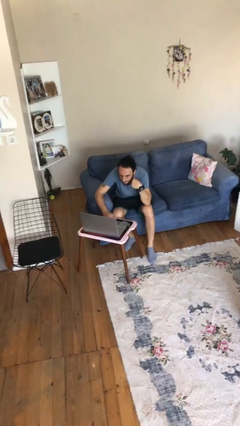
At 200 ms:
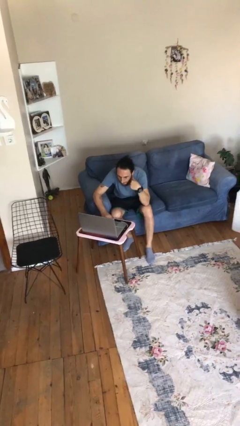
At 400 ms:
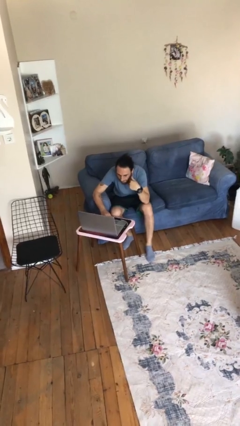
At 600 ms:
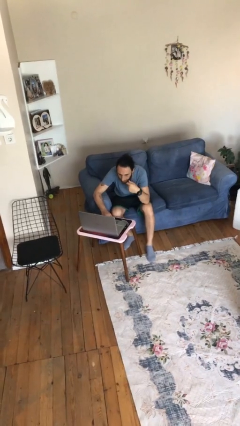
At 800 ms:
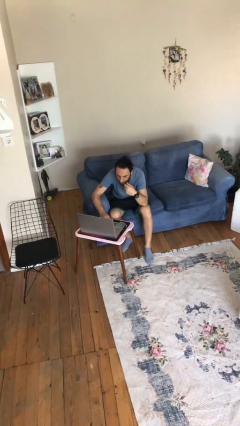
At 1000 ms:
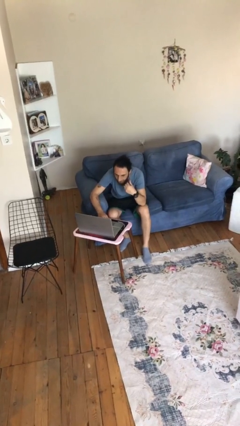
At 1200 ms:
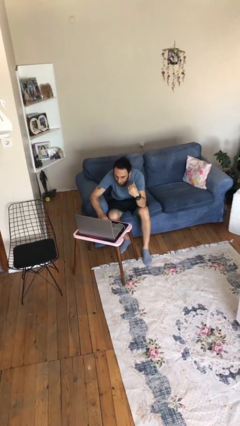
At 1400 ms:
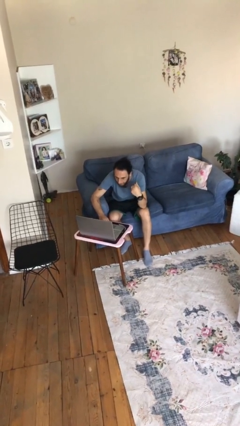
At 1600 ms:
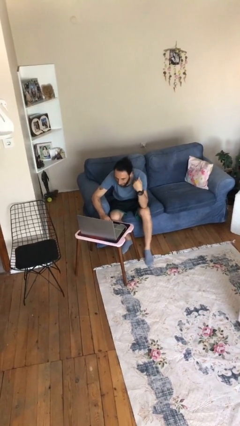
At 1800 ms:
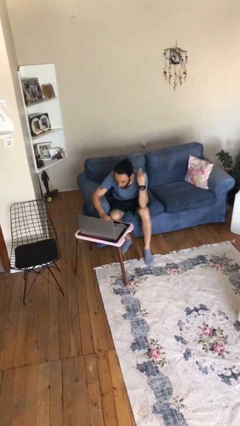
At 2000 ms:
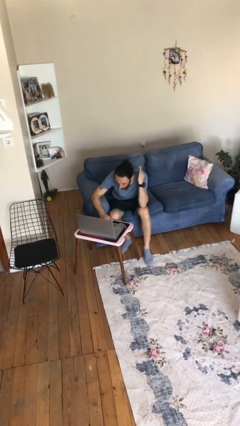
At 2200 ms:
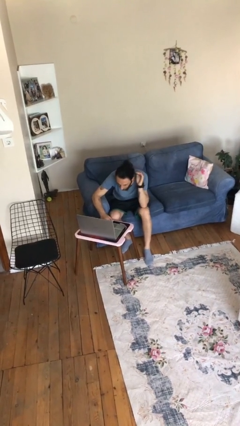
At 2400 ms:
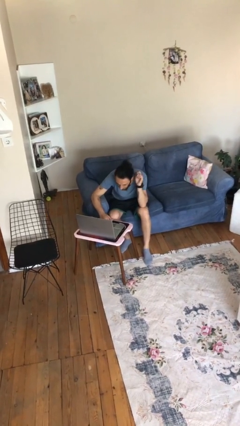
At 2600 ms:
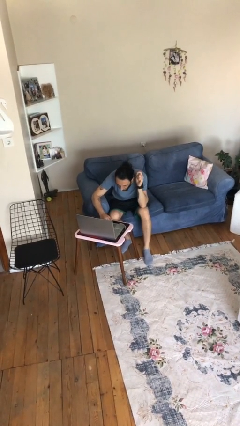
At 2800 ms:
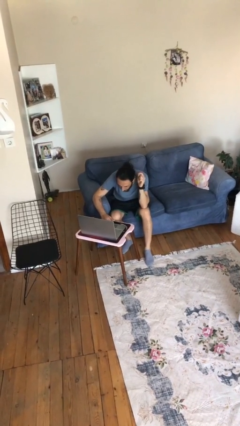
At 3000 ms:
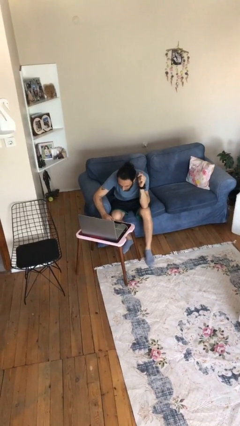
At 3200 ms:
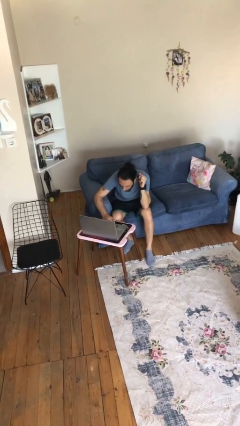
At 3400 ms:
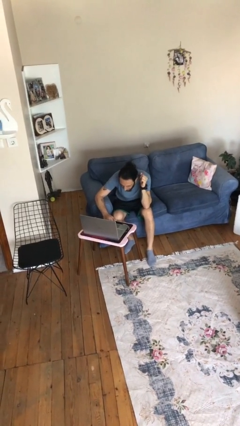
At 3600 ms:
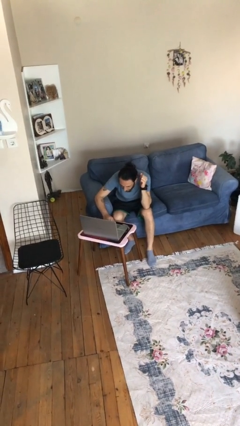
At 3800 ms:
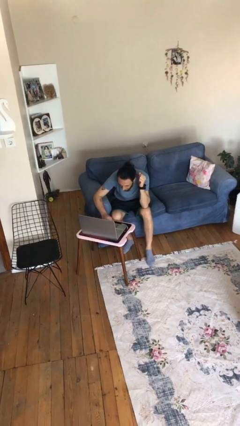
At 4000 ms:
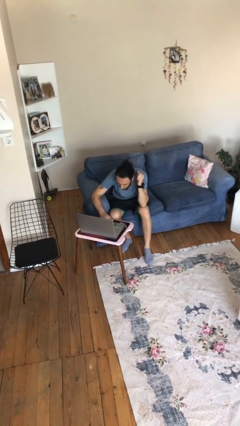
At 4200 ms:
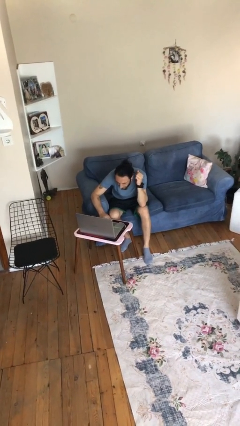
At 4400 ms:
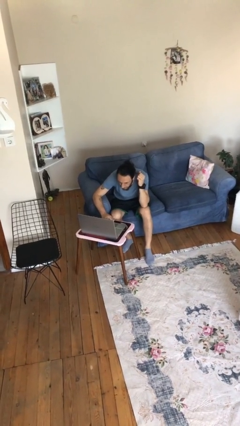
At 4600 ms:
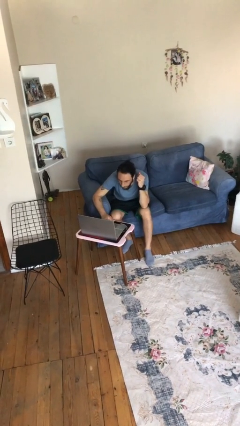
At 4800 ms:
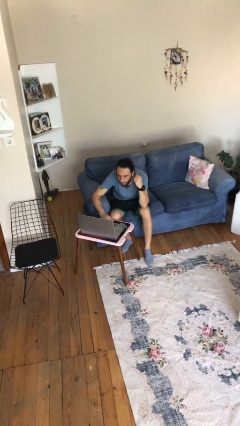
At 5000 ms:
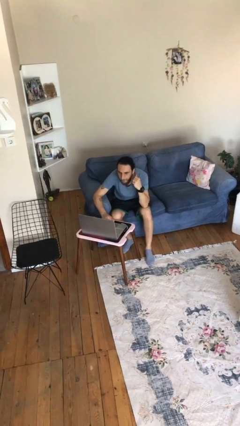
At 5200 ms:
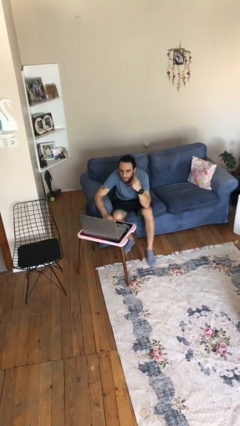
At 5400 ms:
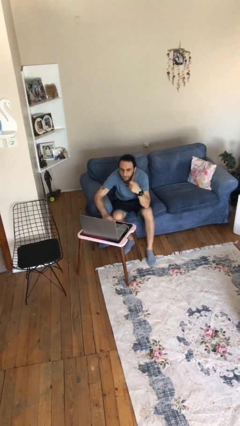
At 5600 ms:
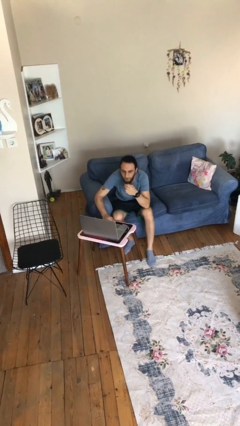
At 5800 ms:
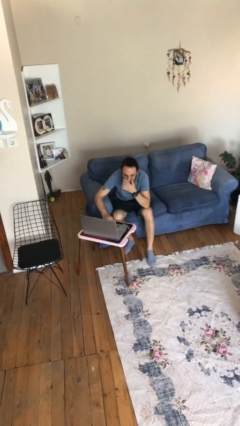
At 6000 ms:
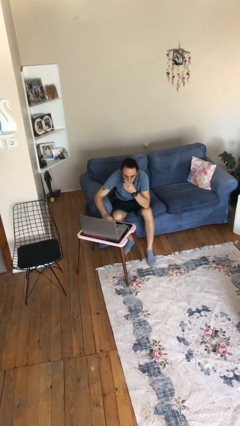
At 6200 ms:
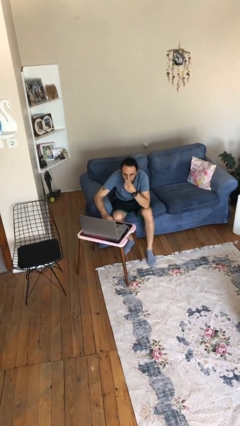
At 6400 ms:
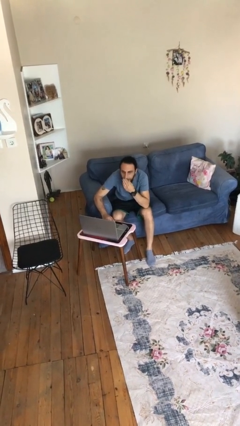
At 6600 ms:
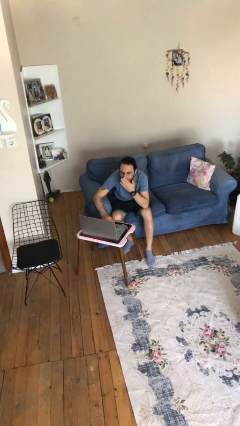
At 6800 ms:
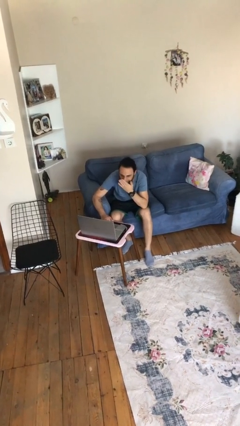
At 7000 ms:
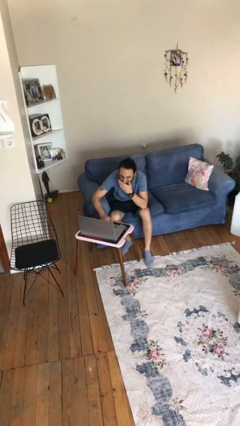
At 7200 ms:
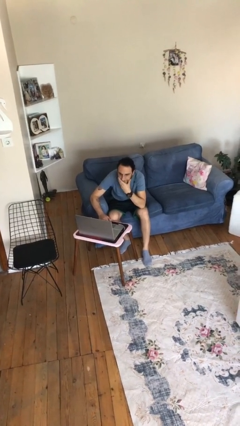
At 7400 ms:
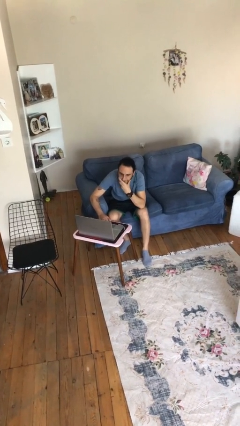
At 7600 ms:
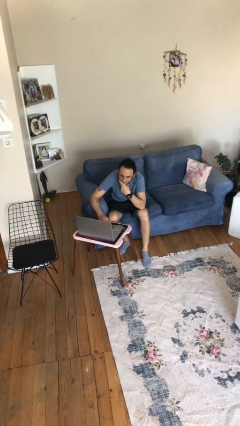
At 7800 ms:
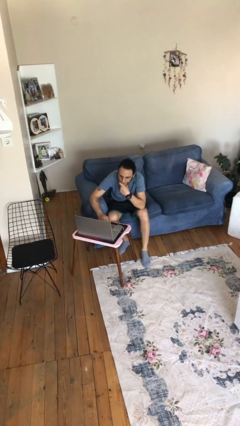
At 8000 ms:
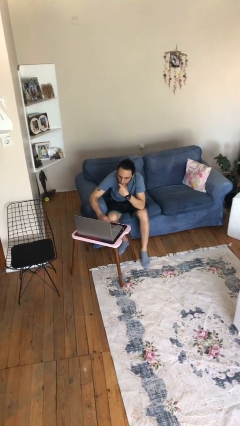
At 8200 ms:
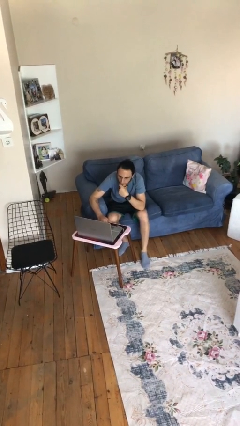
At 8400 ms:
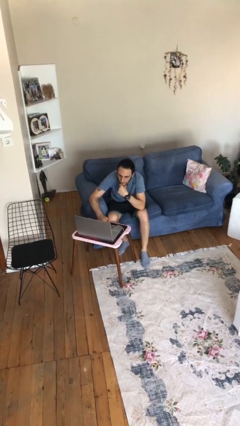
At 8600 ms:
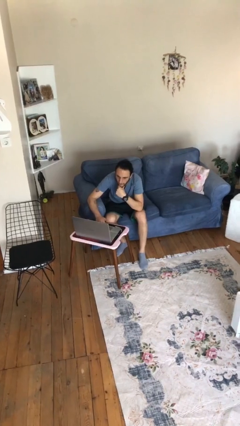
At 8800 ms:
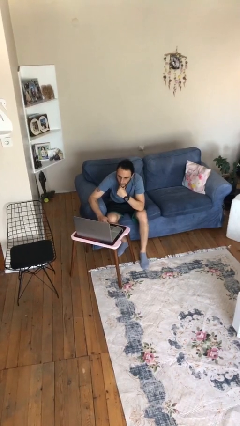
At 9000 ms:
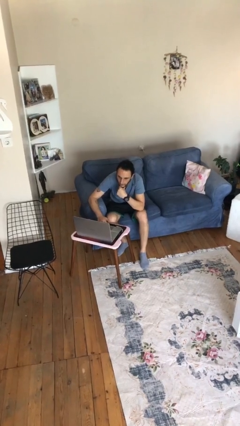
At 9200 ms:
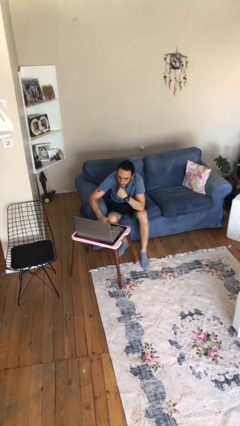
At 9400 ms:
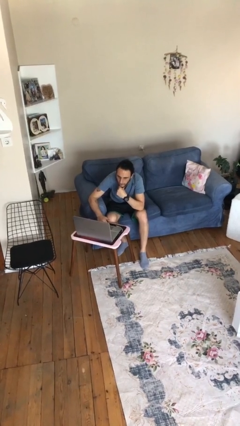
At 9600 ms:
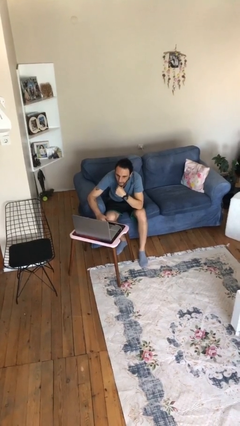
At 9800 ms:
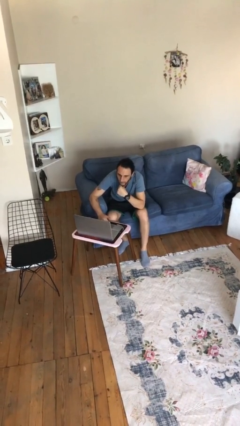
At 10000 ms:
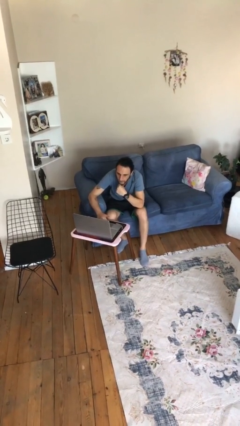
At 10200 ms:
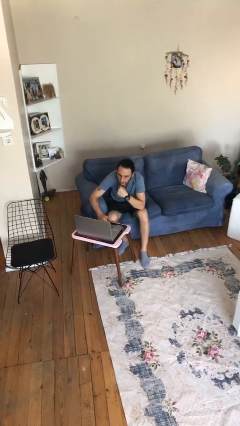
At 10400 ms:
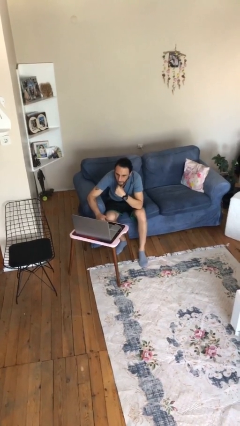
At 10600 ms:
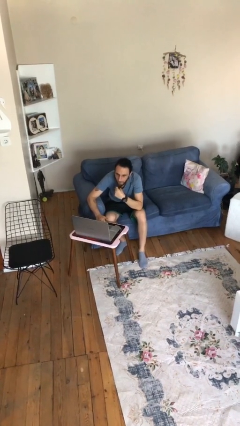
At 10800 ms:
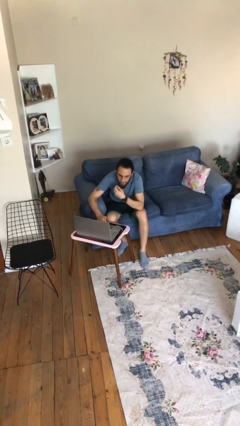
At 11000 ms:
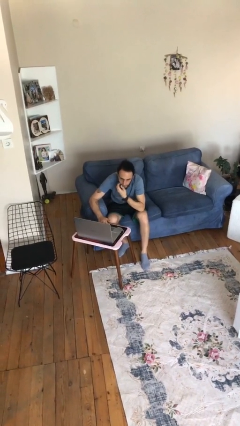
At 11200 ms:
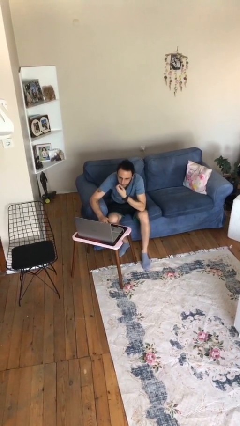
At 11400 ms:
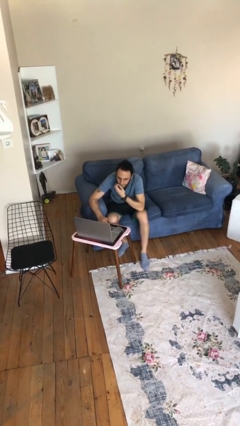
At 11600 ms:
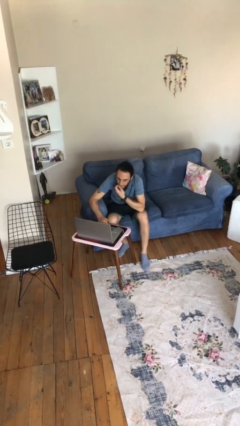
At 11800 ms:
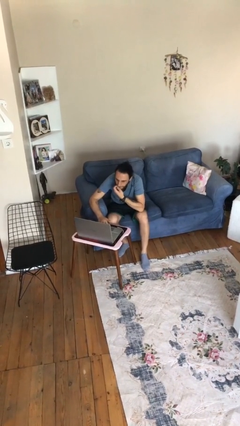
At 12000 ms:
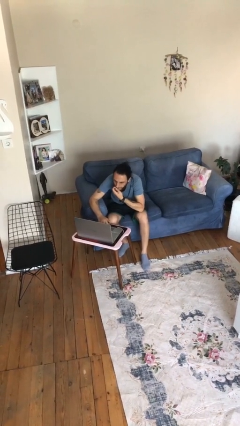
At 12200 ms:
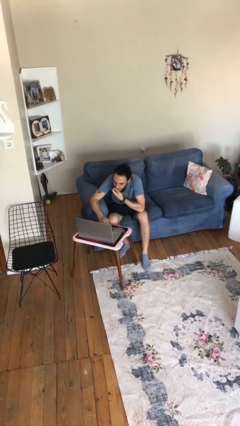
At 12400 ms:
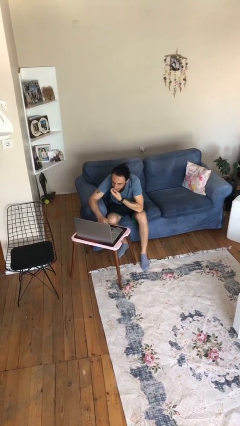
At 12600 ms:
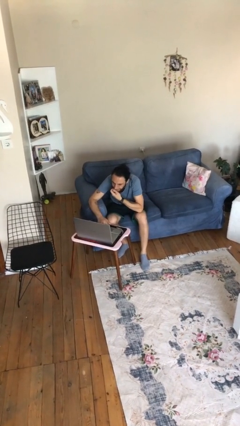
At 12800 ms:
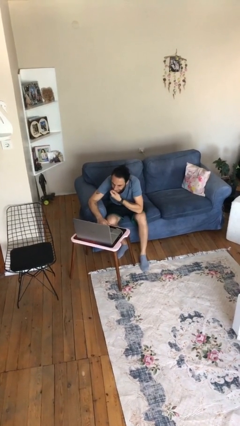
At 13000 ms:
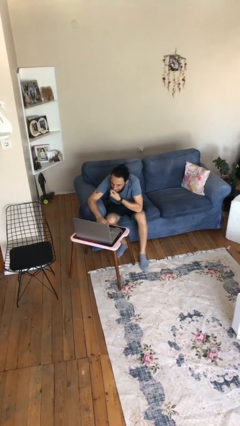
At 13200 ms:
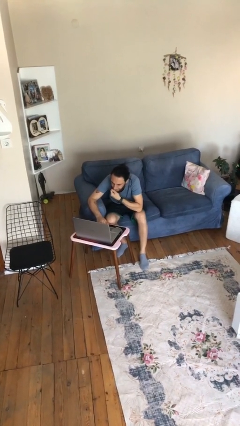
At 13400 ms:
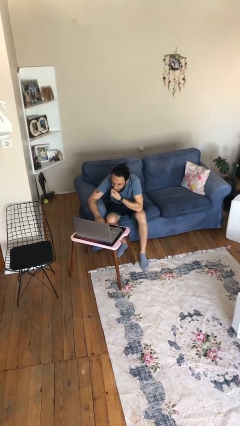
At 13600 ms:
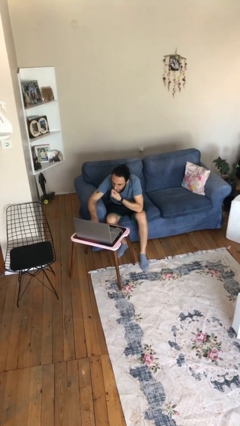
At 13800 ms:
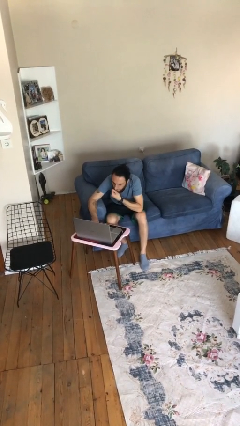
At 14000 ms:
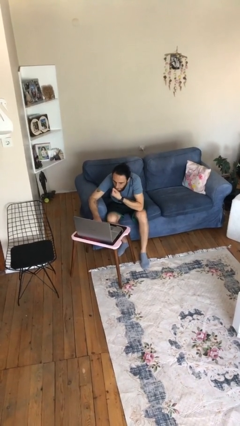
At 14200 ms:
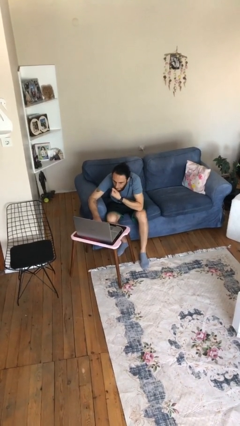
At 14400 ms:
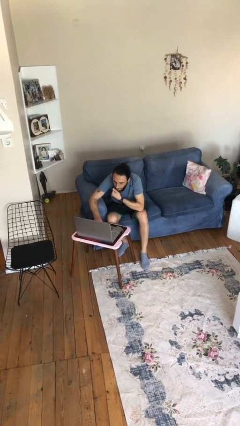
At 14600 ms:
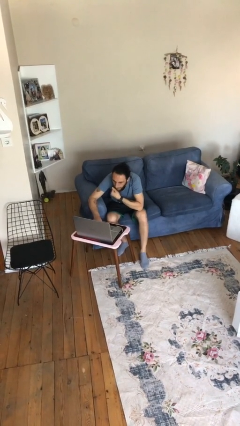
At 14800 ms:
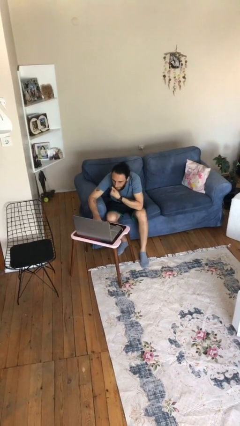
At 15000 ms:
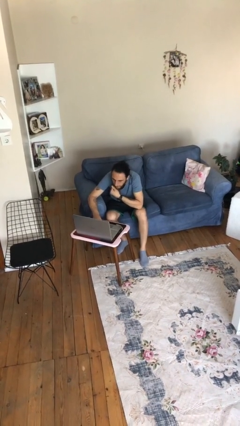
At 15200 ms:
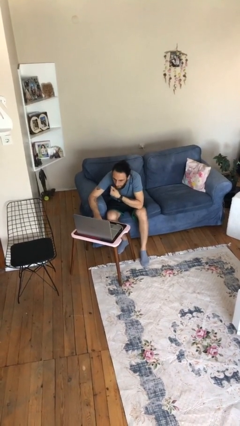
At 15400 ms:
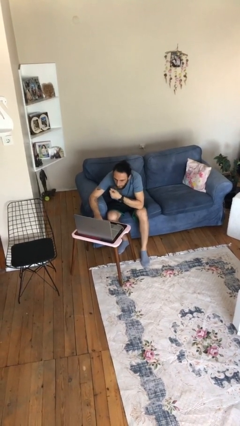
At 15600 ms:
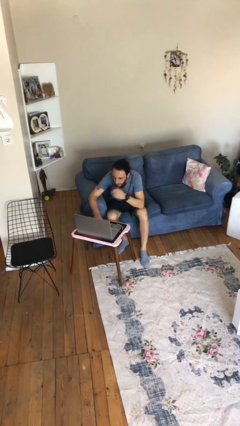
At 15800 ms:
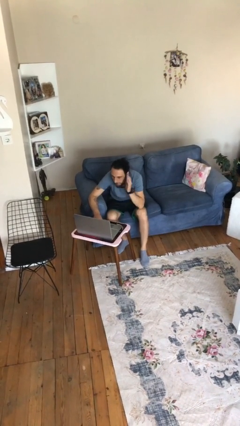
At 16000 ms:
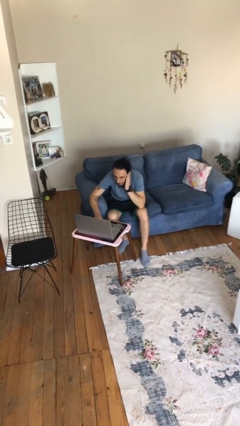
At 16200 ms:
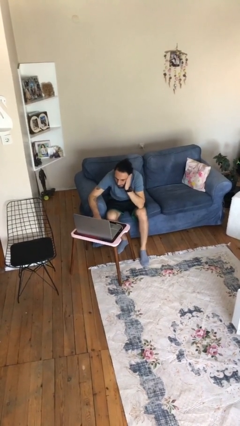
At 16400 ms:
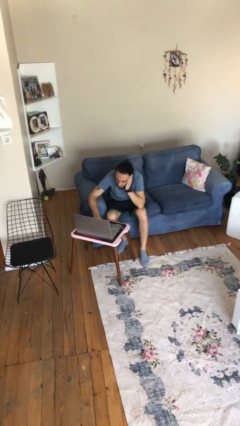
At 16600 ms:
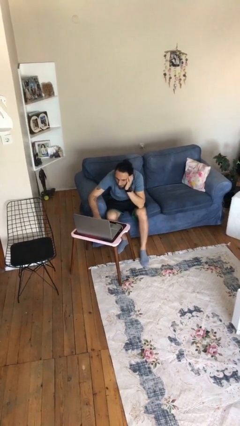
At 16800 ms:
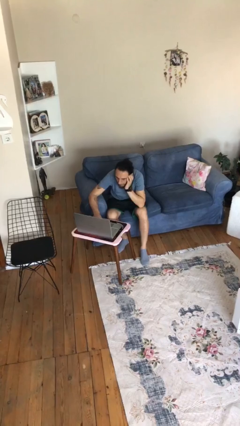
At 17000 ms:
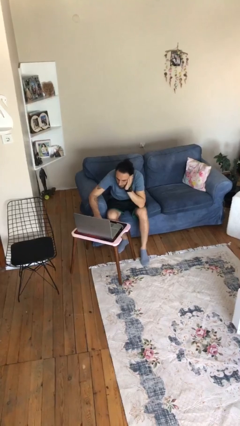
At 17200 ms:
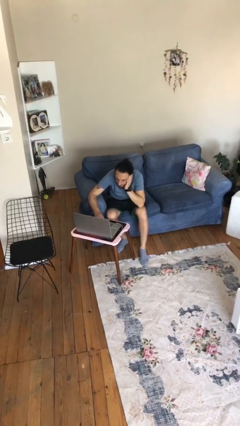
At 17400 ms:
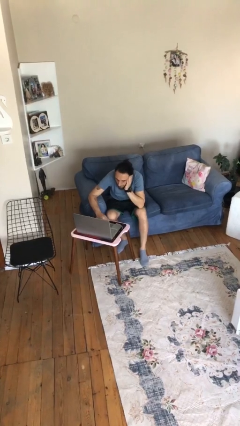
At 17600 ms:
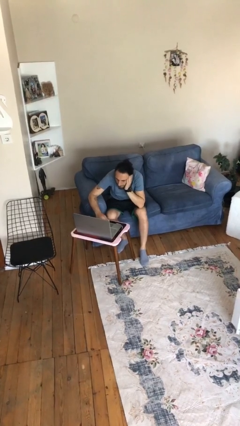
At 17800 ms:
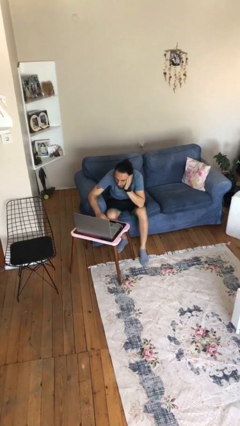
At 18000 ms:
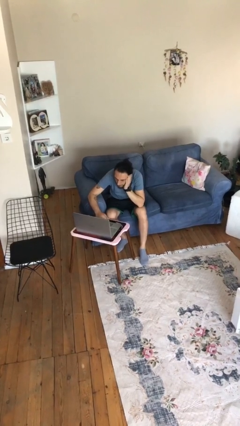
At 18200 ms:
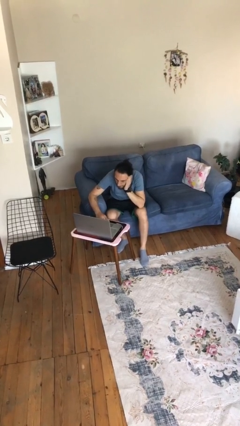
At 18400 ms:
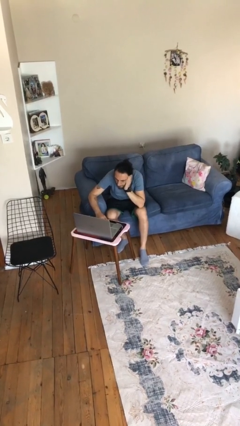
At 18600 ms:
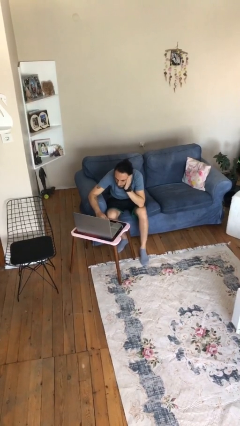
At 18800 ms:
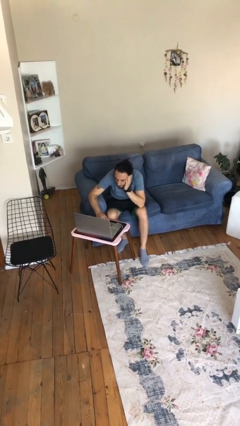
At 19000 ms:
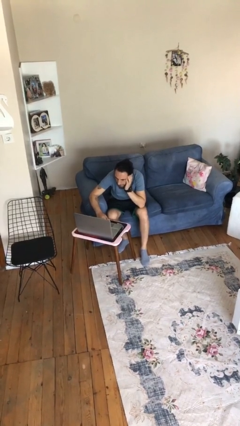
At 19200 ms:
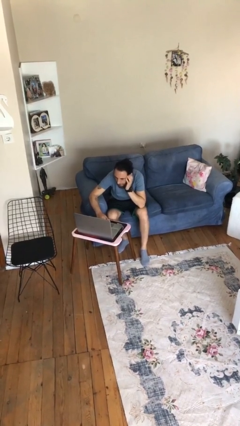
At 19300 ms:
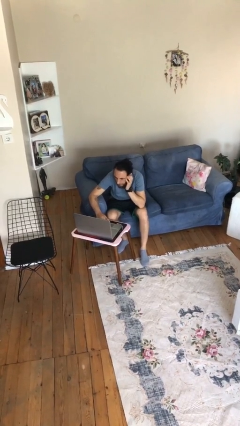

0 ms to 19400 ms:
person interacts with laptop
